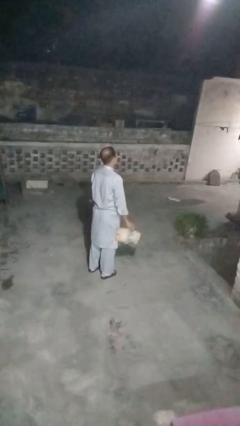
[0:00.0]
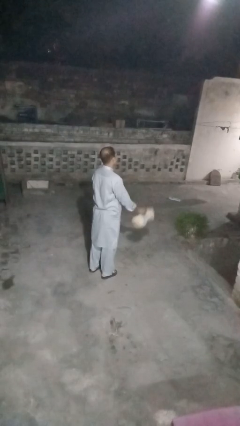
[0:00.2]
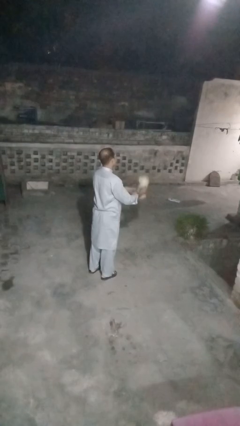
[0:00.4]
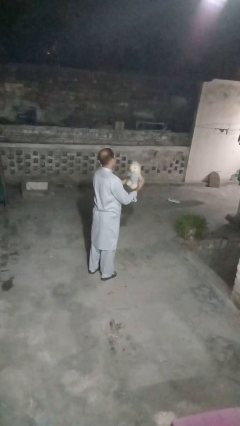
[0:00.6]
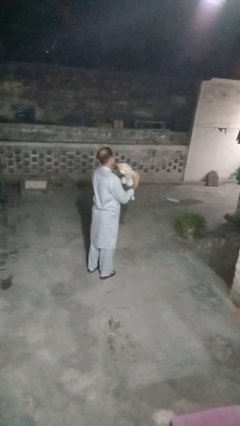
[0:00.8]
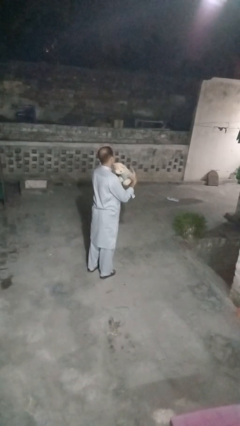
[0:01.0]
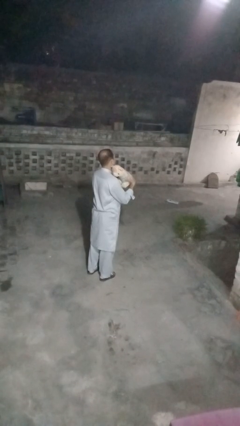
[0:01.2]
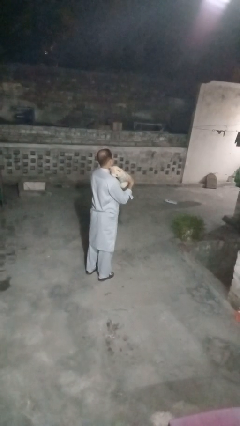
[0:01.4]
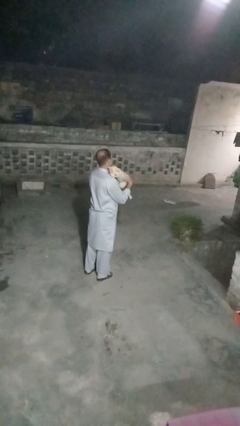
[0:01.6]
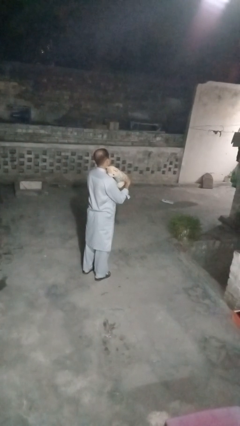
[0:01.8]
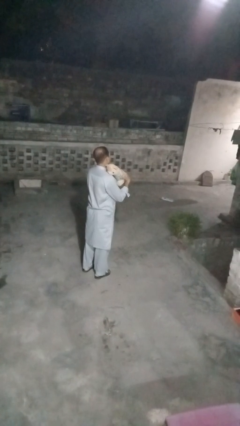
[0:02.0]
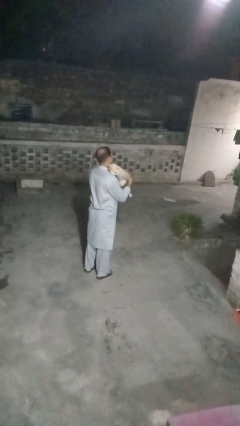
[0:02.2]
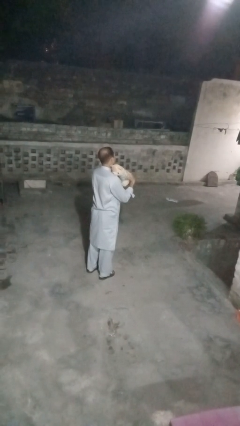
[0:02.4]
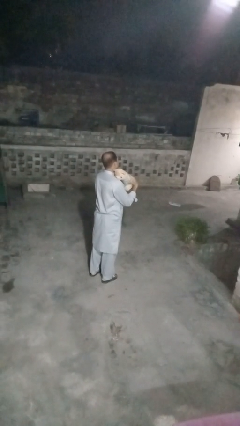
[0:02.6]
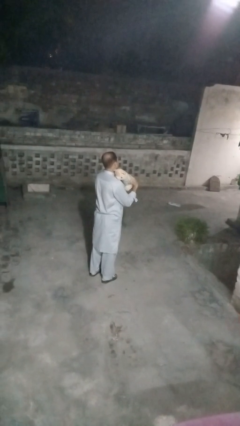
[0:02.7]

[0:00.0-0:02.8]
person hugs stuffed animal

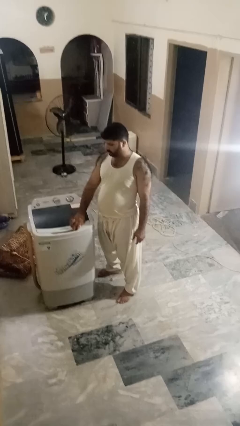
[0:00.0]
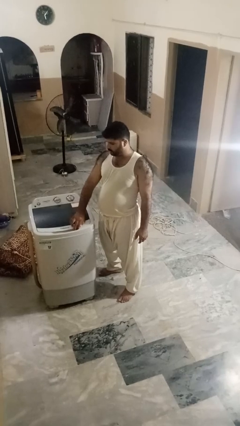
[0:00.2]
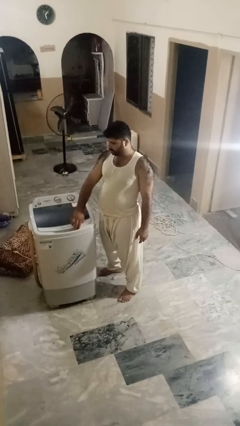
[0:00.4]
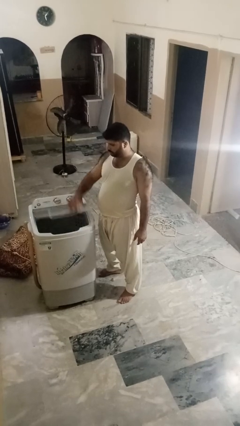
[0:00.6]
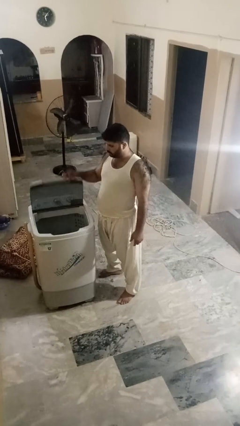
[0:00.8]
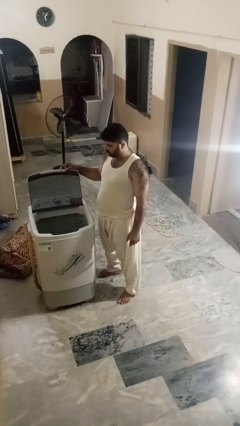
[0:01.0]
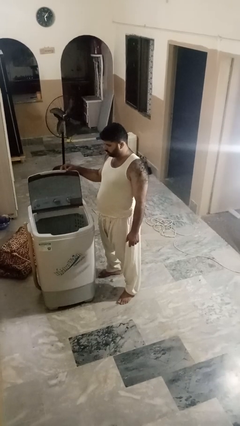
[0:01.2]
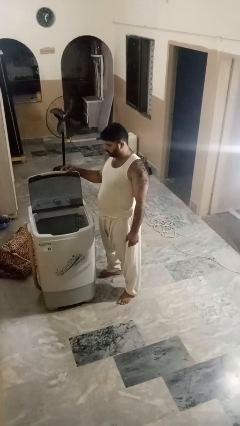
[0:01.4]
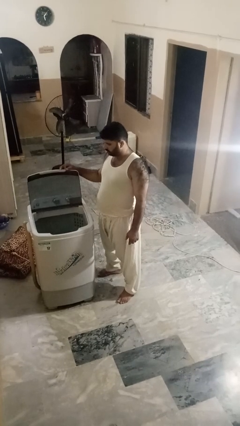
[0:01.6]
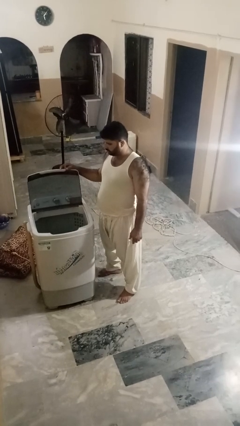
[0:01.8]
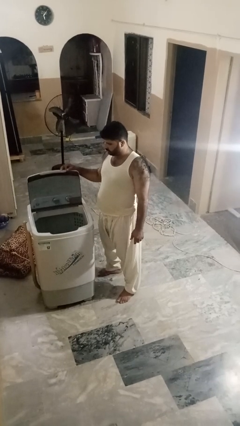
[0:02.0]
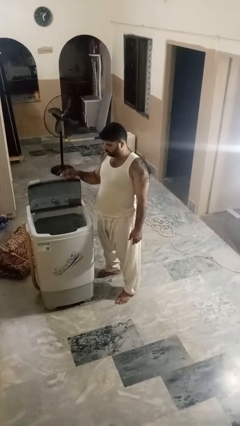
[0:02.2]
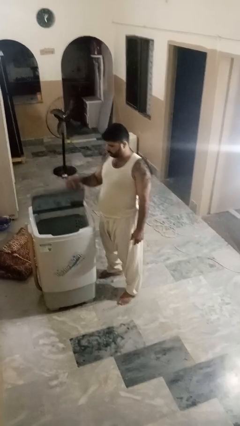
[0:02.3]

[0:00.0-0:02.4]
person opens clothes washer

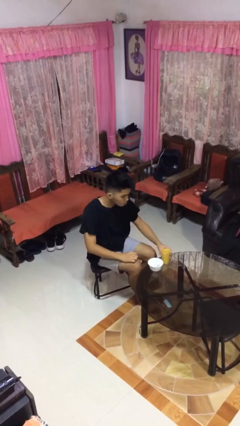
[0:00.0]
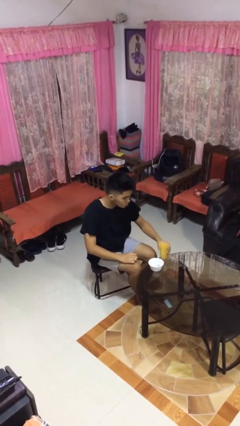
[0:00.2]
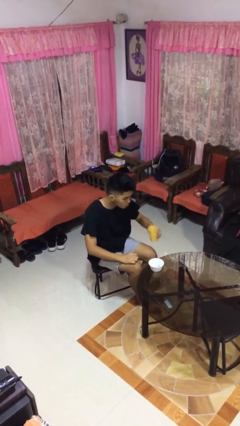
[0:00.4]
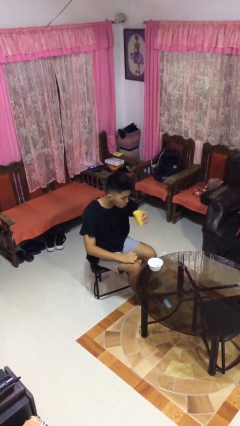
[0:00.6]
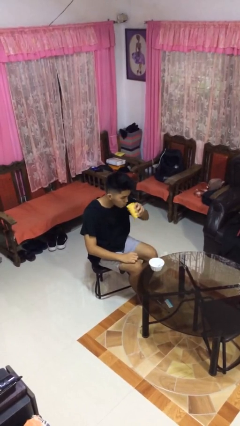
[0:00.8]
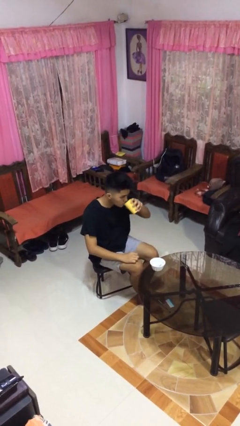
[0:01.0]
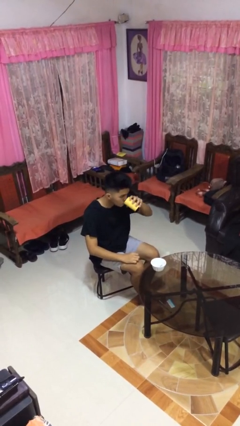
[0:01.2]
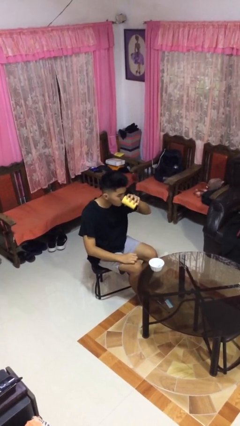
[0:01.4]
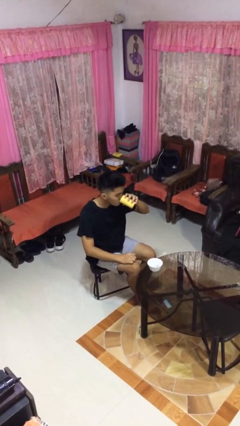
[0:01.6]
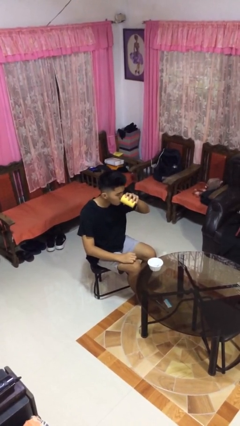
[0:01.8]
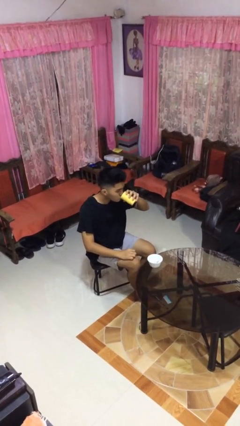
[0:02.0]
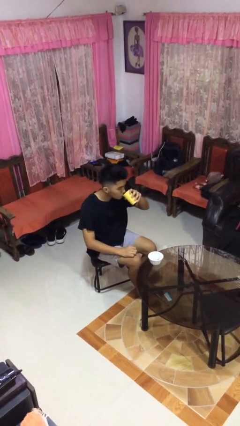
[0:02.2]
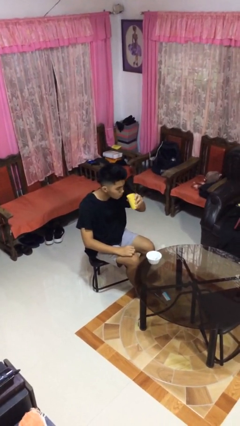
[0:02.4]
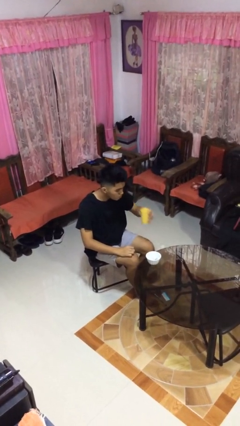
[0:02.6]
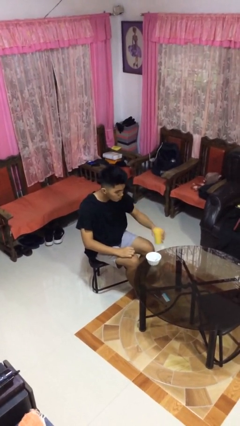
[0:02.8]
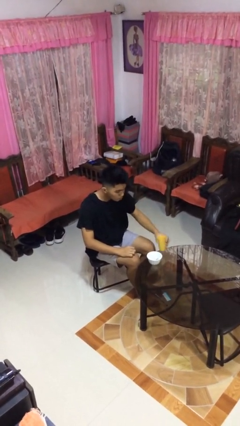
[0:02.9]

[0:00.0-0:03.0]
person drinks from cup

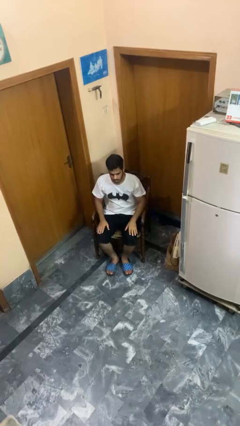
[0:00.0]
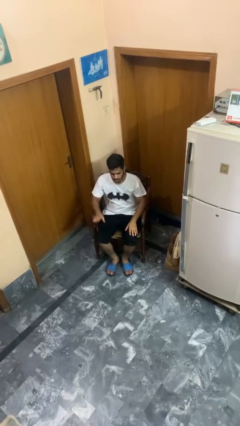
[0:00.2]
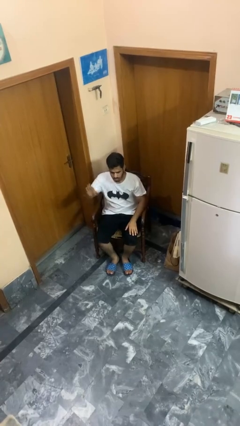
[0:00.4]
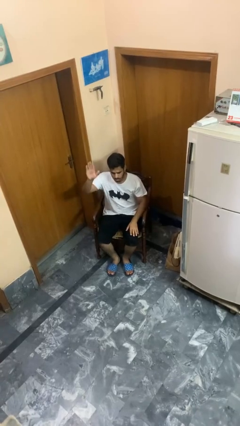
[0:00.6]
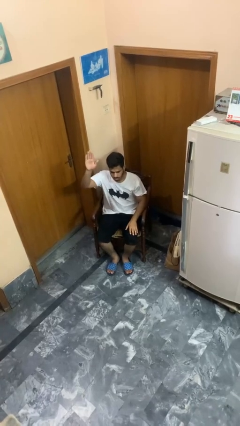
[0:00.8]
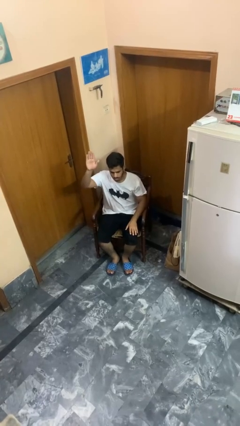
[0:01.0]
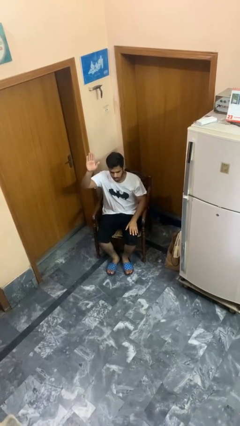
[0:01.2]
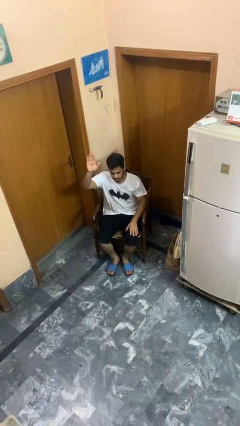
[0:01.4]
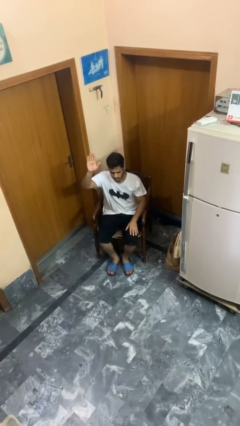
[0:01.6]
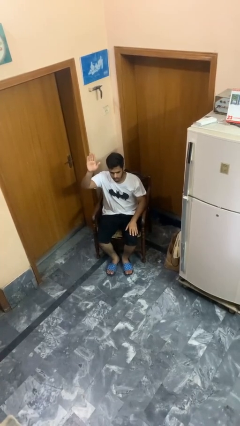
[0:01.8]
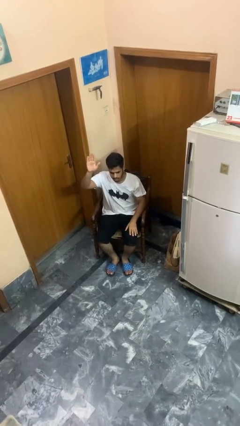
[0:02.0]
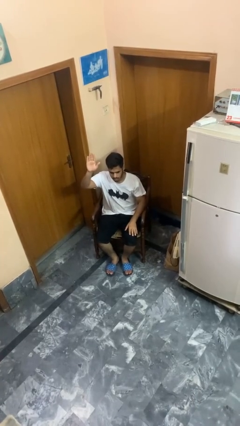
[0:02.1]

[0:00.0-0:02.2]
person gestures raise hand

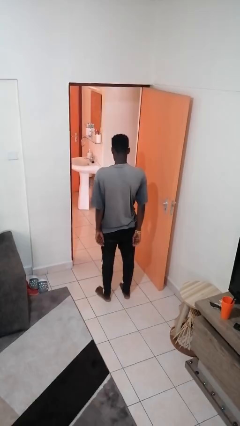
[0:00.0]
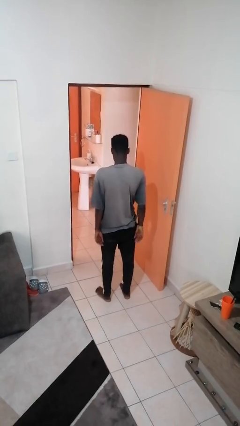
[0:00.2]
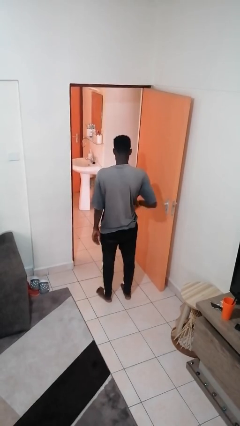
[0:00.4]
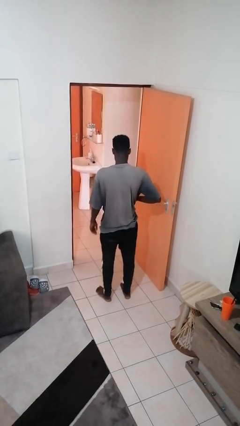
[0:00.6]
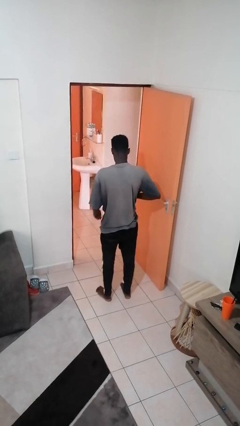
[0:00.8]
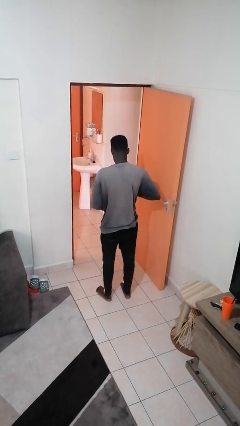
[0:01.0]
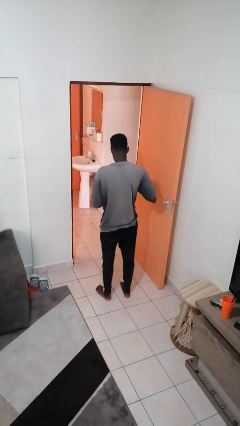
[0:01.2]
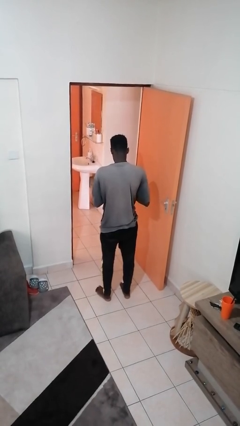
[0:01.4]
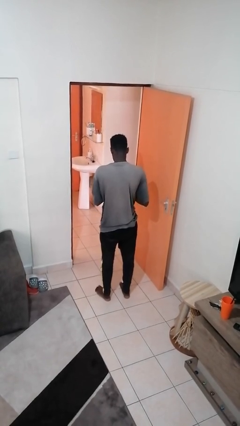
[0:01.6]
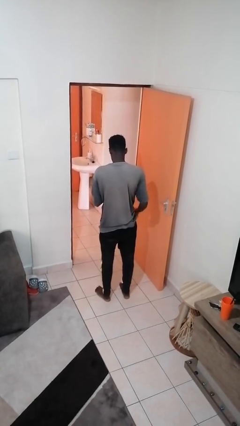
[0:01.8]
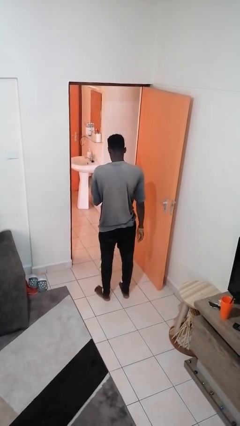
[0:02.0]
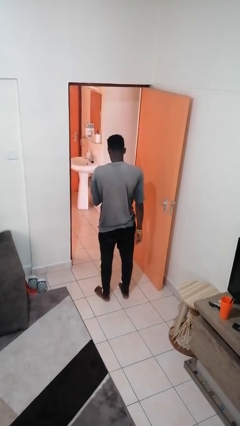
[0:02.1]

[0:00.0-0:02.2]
person takes phone from pocket

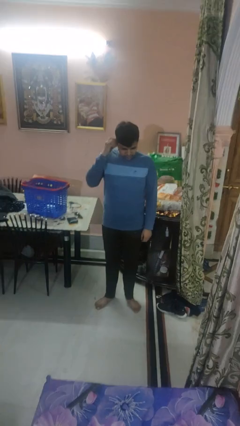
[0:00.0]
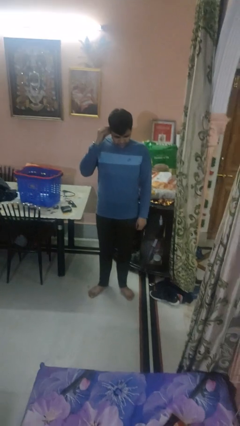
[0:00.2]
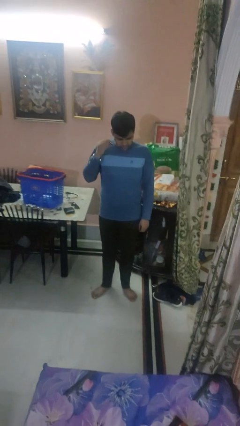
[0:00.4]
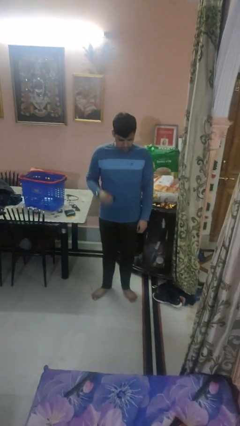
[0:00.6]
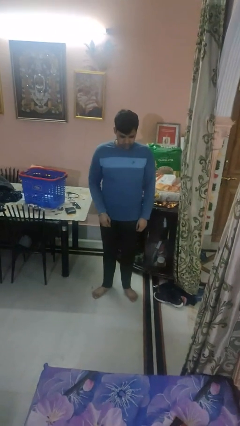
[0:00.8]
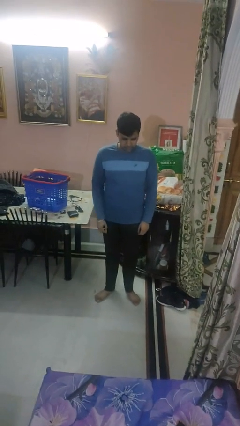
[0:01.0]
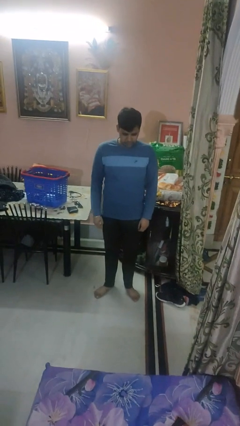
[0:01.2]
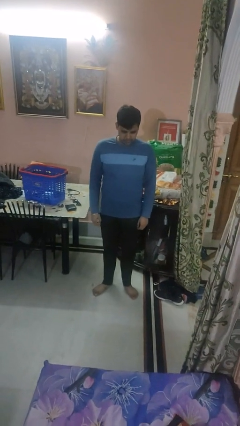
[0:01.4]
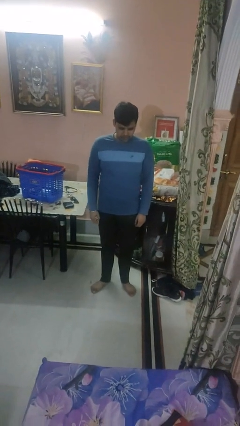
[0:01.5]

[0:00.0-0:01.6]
person takes off earrings

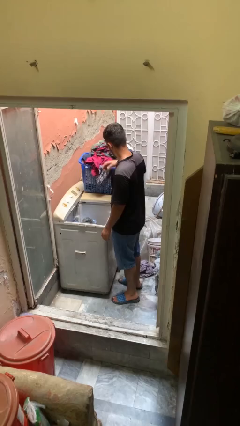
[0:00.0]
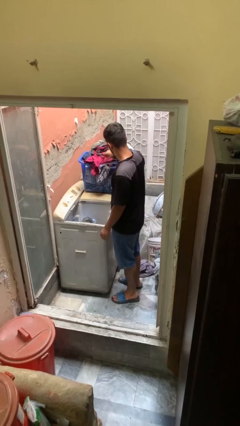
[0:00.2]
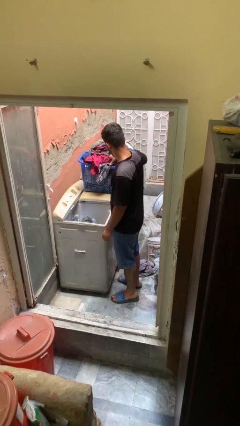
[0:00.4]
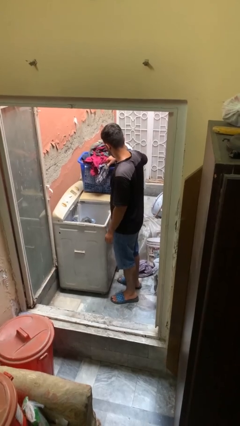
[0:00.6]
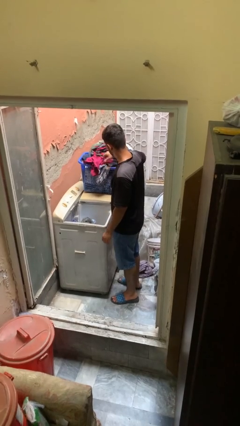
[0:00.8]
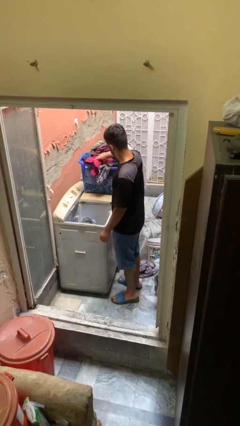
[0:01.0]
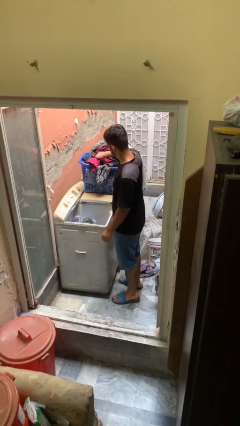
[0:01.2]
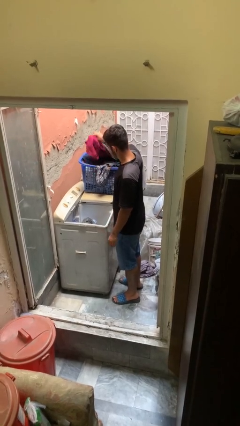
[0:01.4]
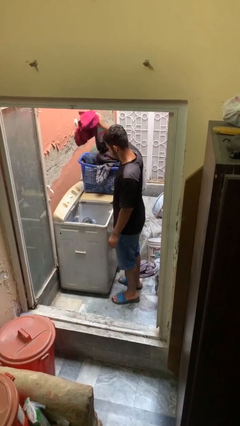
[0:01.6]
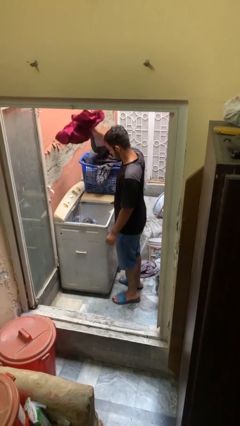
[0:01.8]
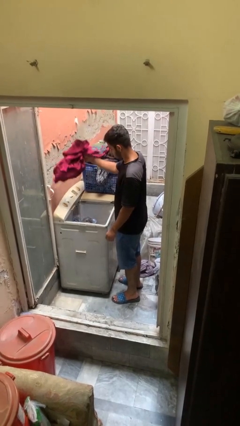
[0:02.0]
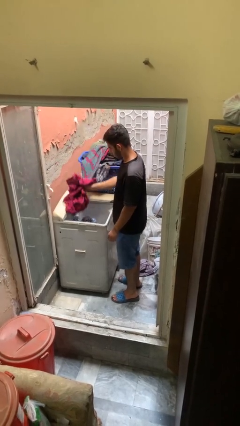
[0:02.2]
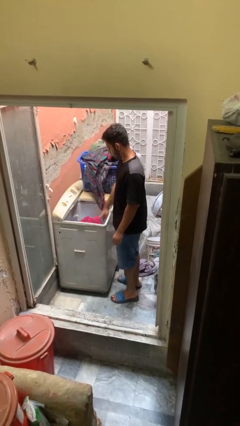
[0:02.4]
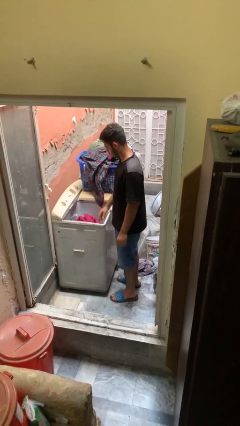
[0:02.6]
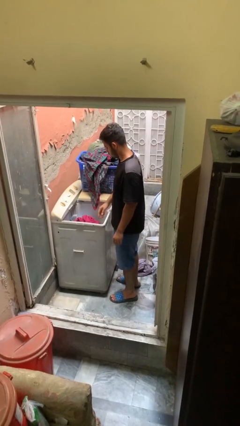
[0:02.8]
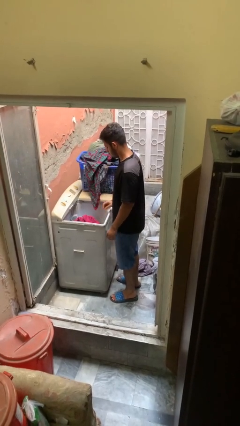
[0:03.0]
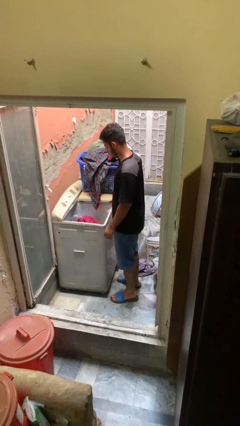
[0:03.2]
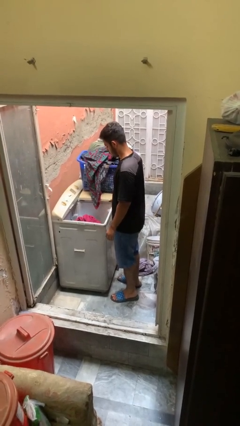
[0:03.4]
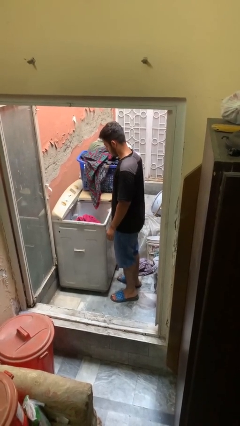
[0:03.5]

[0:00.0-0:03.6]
person loads clotheswasher
